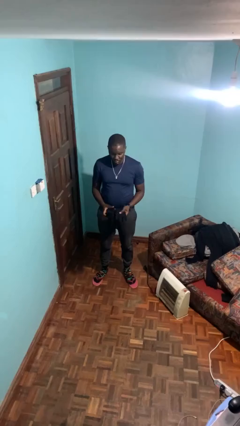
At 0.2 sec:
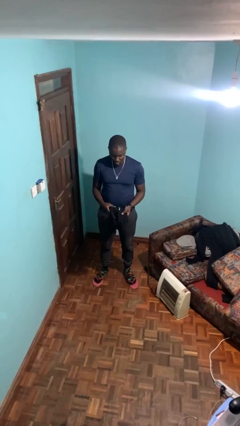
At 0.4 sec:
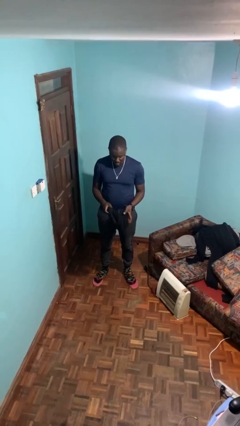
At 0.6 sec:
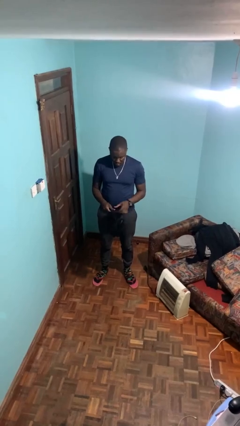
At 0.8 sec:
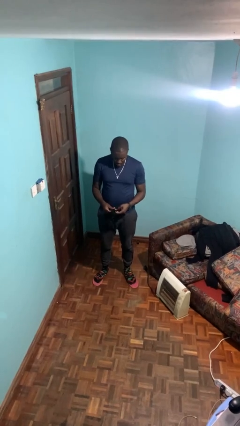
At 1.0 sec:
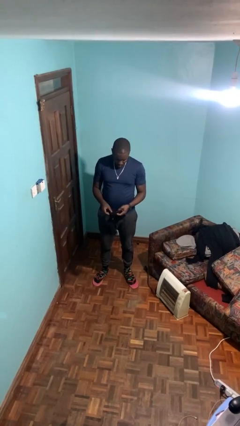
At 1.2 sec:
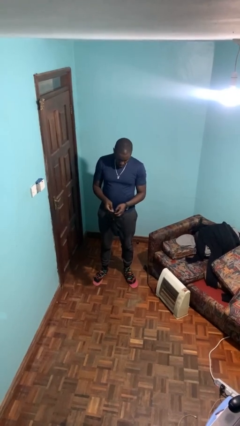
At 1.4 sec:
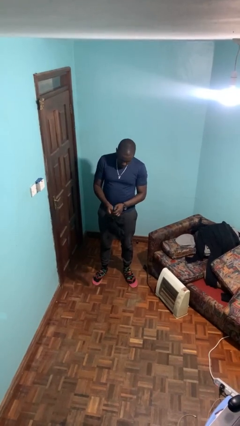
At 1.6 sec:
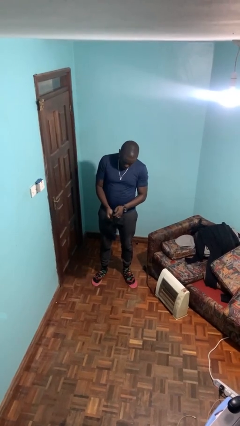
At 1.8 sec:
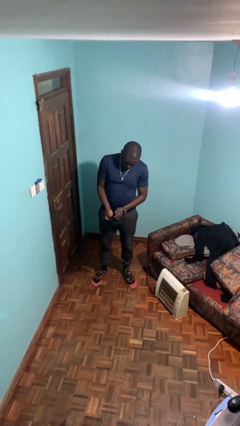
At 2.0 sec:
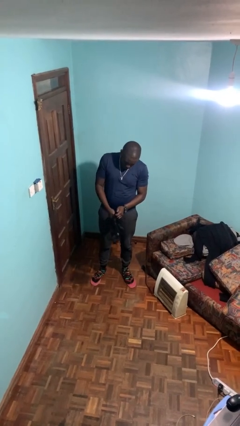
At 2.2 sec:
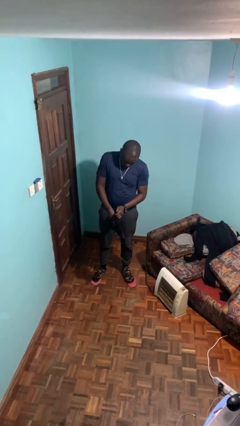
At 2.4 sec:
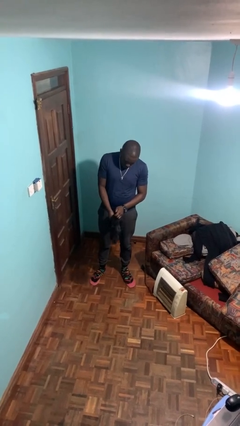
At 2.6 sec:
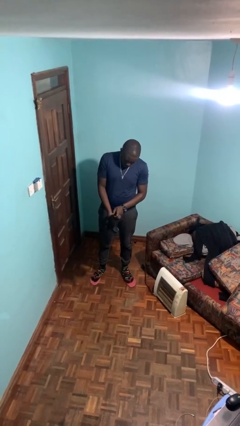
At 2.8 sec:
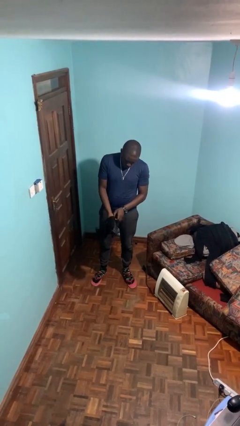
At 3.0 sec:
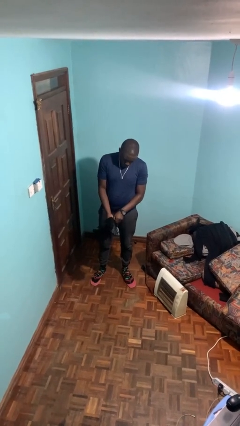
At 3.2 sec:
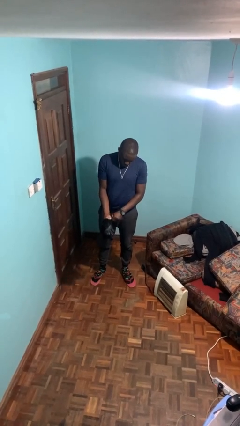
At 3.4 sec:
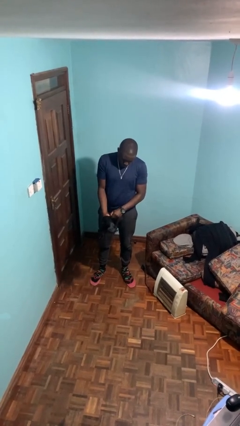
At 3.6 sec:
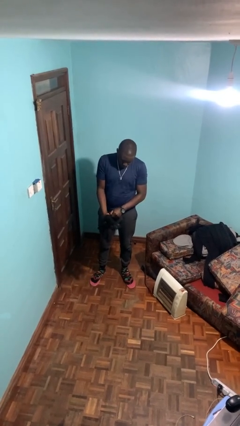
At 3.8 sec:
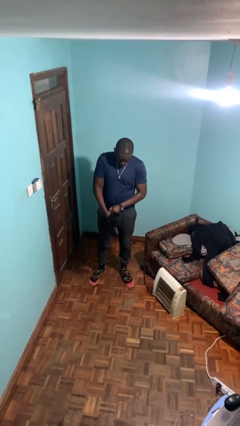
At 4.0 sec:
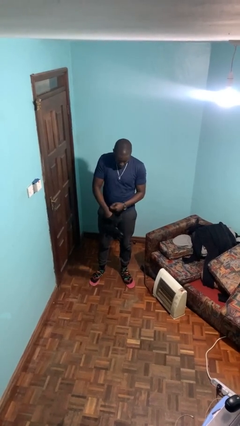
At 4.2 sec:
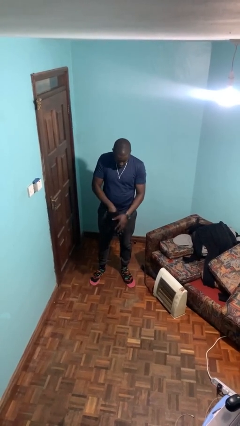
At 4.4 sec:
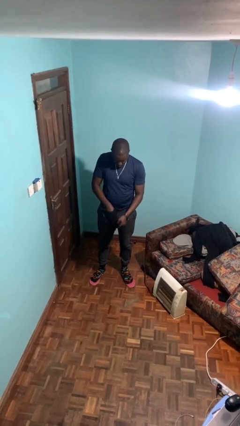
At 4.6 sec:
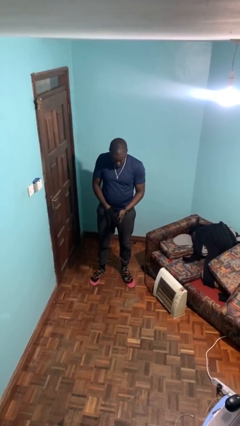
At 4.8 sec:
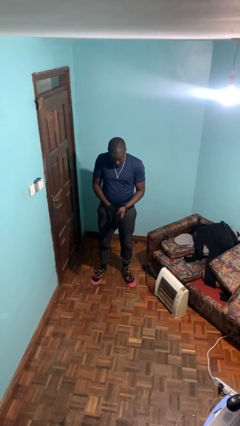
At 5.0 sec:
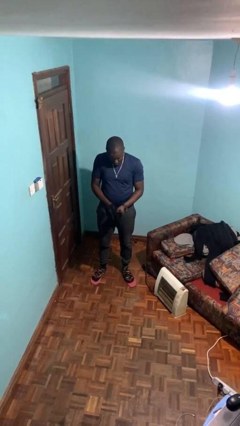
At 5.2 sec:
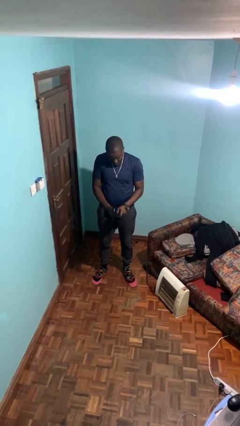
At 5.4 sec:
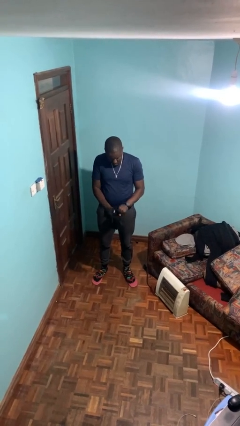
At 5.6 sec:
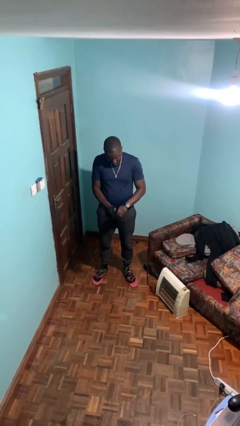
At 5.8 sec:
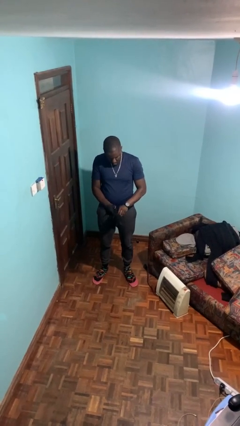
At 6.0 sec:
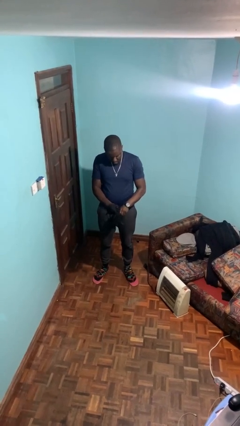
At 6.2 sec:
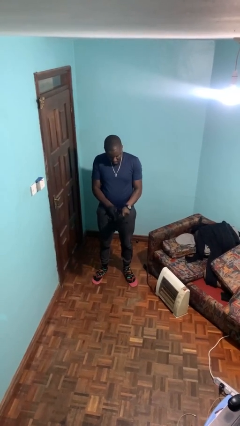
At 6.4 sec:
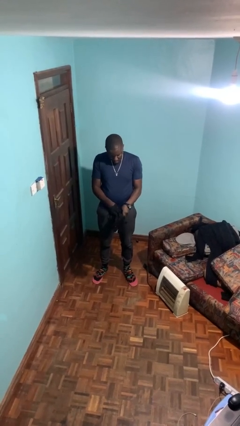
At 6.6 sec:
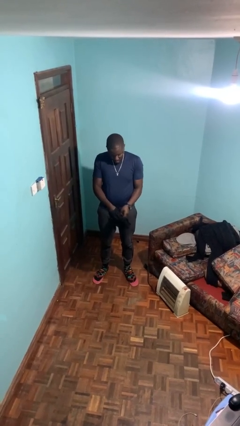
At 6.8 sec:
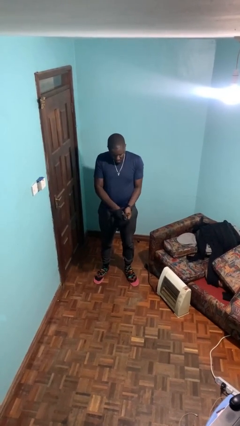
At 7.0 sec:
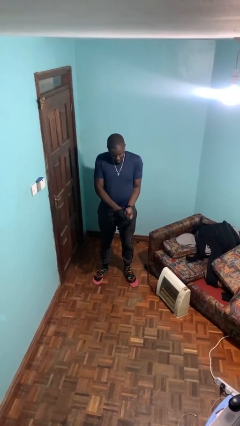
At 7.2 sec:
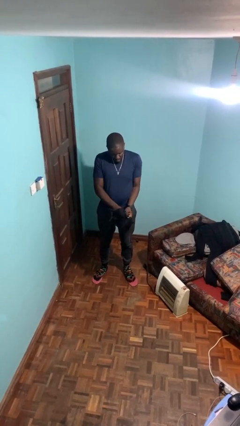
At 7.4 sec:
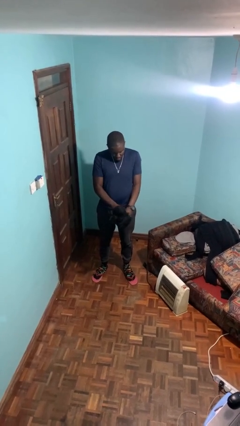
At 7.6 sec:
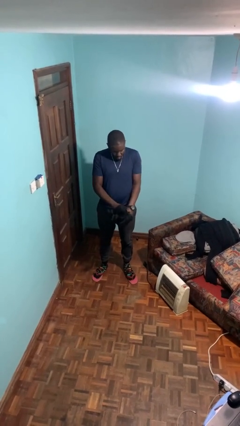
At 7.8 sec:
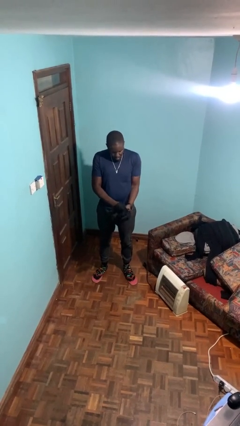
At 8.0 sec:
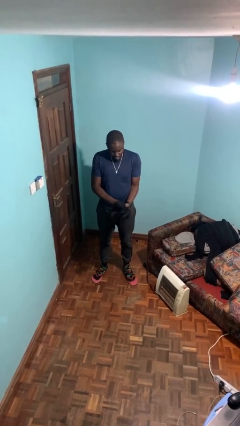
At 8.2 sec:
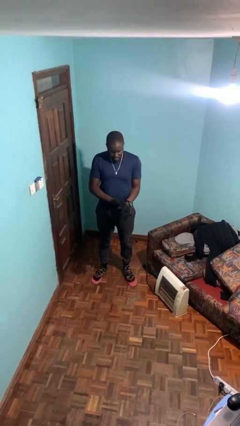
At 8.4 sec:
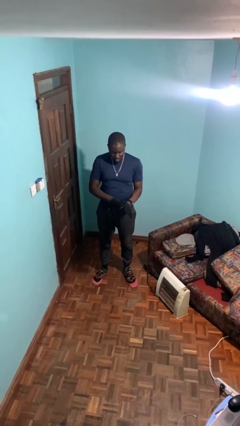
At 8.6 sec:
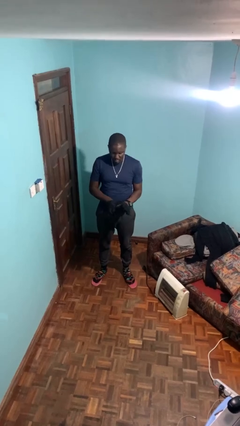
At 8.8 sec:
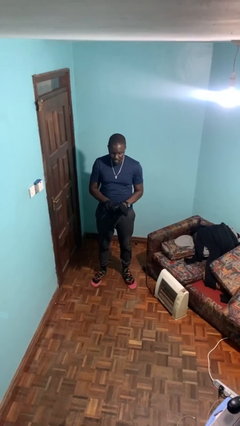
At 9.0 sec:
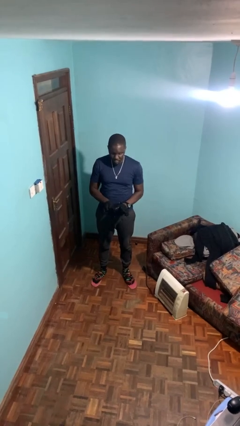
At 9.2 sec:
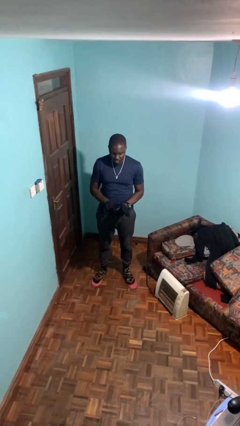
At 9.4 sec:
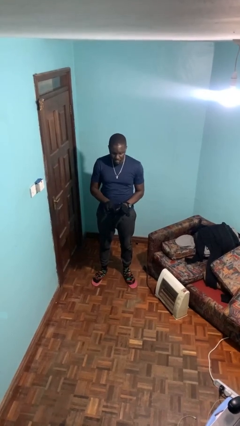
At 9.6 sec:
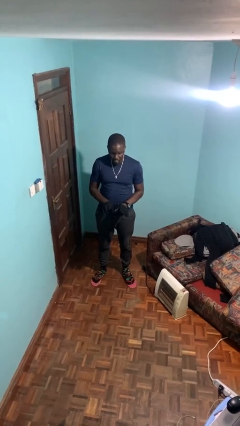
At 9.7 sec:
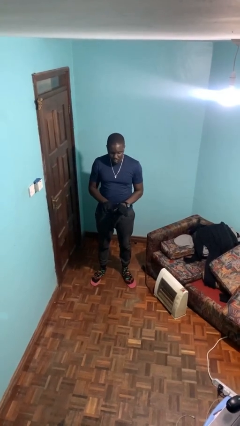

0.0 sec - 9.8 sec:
person puts on gloves

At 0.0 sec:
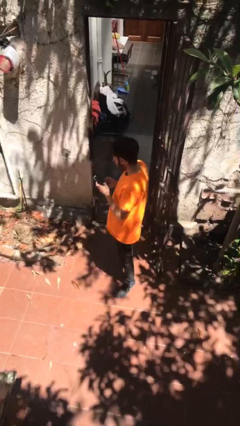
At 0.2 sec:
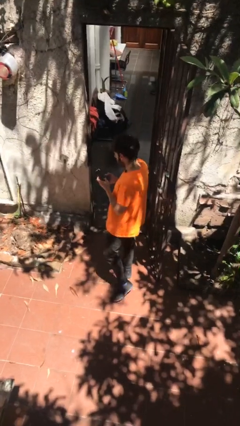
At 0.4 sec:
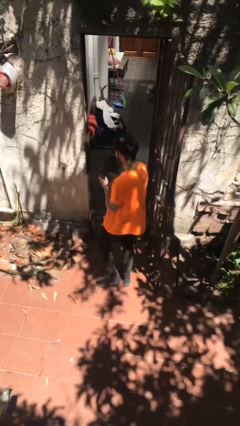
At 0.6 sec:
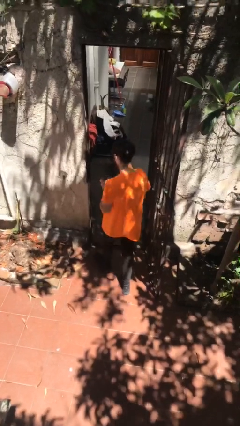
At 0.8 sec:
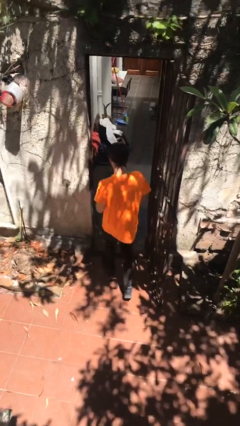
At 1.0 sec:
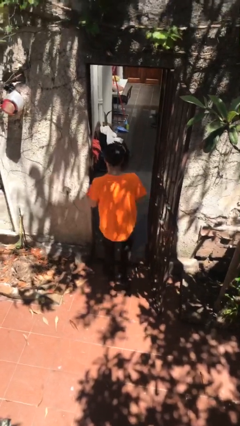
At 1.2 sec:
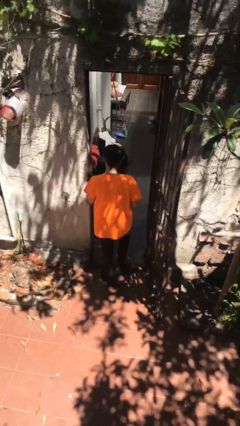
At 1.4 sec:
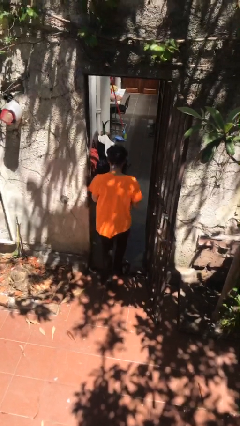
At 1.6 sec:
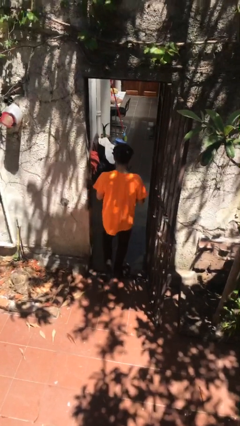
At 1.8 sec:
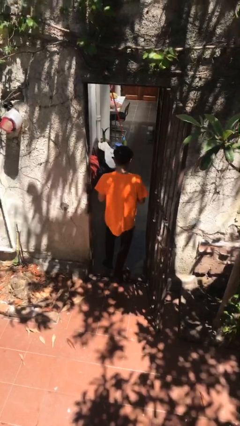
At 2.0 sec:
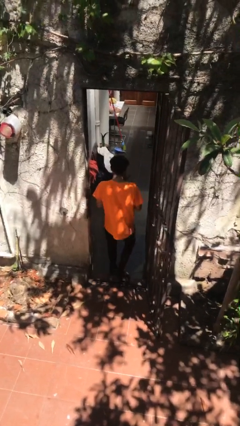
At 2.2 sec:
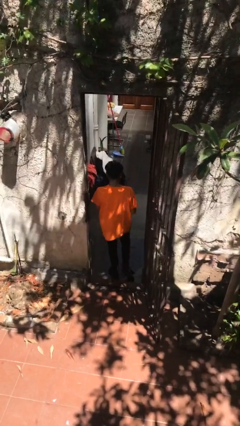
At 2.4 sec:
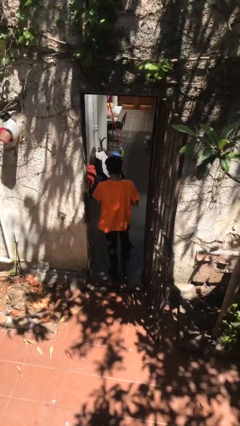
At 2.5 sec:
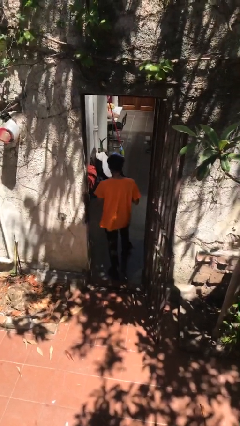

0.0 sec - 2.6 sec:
person exits scene through structure

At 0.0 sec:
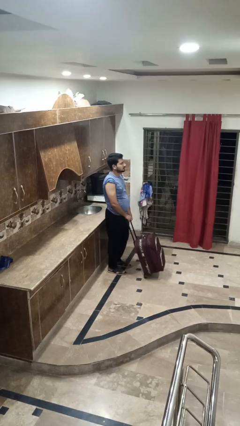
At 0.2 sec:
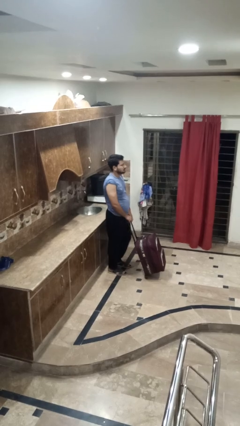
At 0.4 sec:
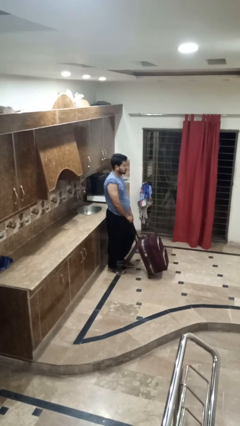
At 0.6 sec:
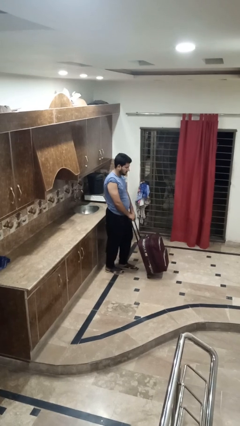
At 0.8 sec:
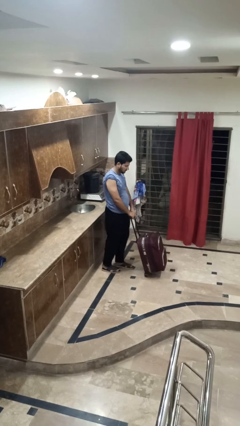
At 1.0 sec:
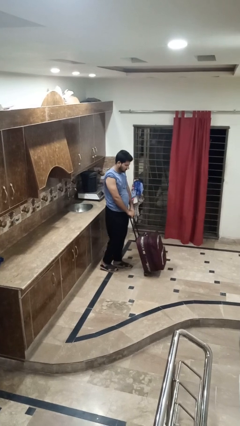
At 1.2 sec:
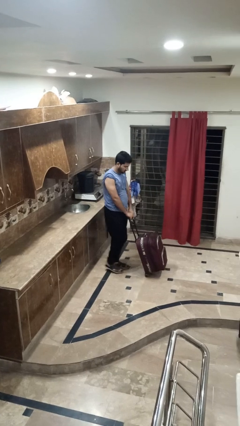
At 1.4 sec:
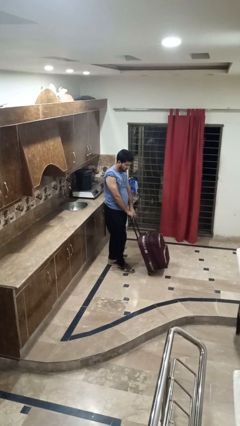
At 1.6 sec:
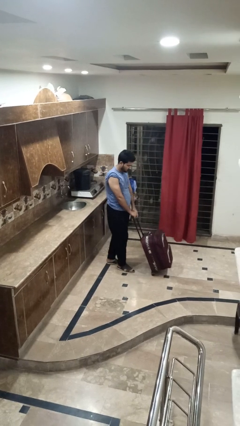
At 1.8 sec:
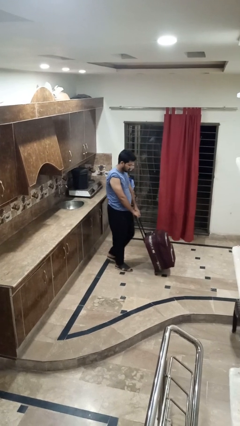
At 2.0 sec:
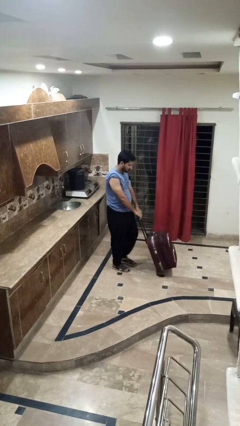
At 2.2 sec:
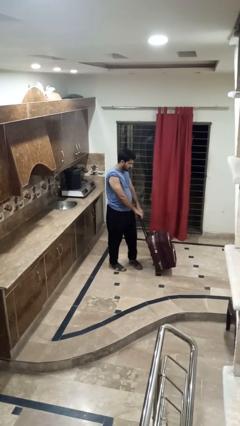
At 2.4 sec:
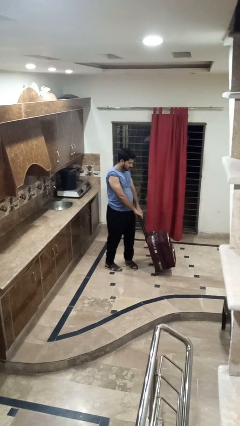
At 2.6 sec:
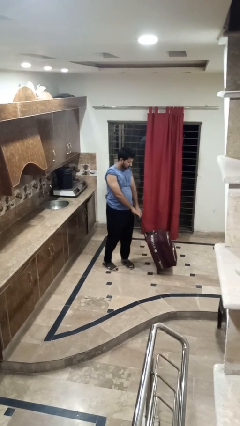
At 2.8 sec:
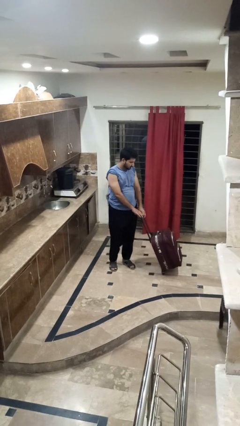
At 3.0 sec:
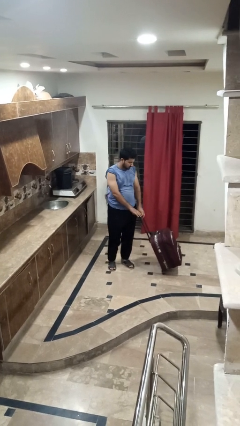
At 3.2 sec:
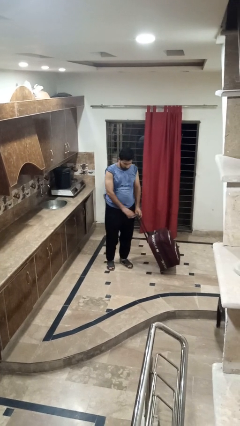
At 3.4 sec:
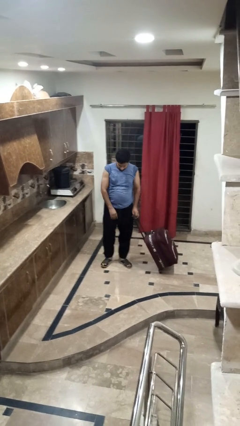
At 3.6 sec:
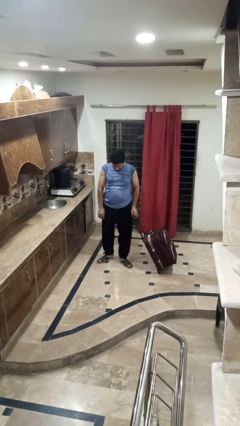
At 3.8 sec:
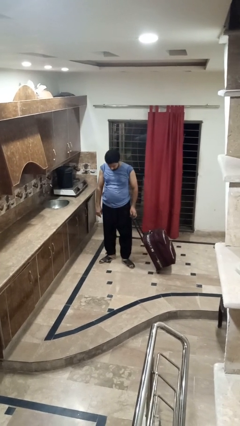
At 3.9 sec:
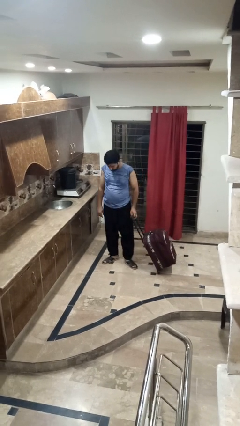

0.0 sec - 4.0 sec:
person pushes wheeled cart

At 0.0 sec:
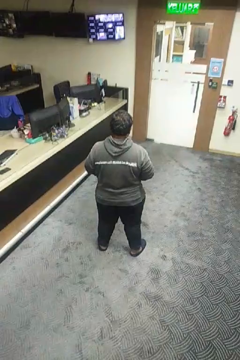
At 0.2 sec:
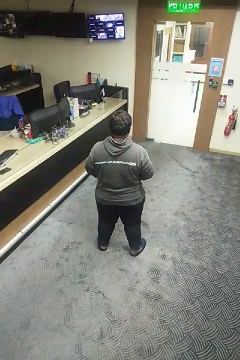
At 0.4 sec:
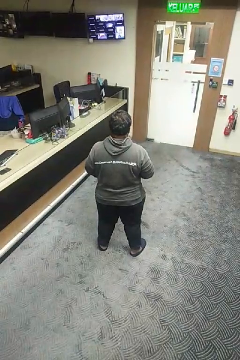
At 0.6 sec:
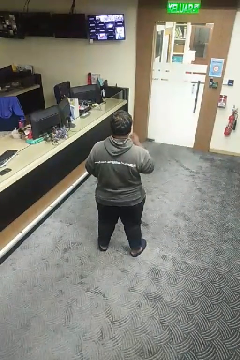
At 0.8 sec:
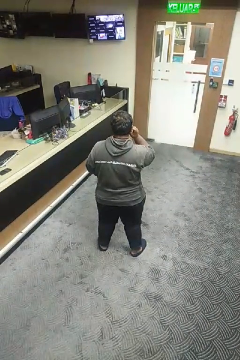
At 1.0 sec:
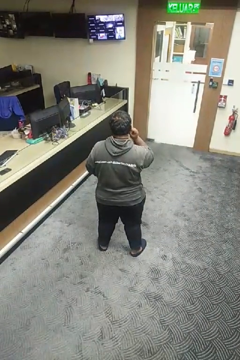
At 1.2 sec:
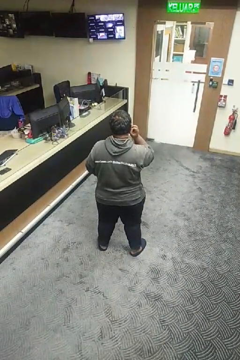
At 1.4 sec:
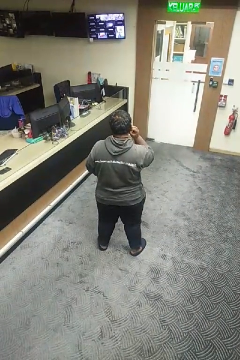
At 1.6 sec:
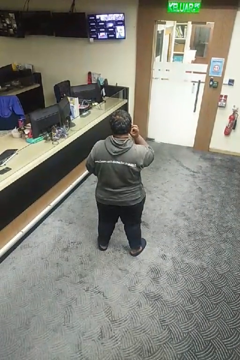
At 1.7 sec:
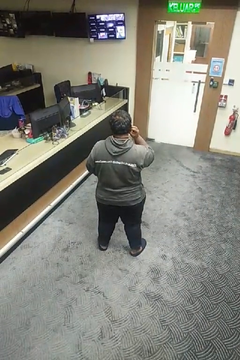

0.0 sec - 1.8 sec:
person touches earlobe
